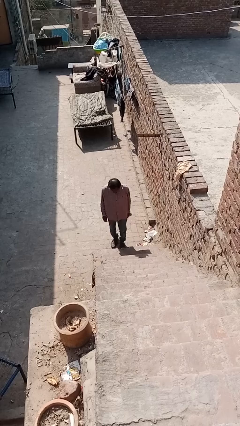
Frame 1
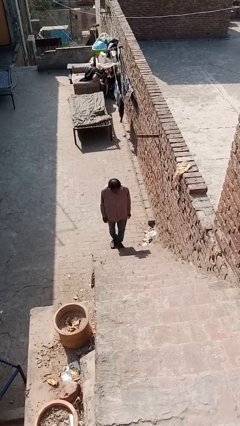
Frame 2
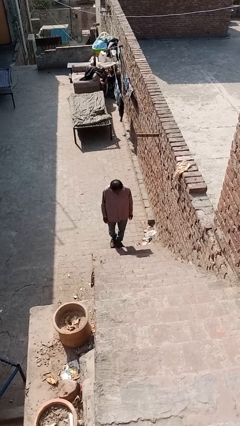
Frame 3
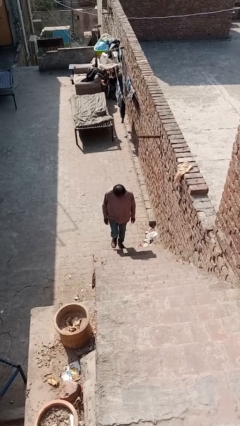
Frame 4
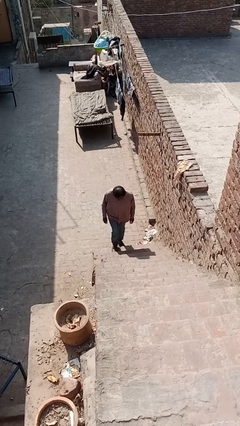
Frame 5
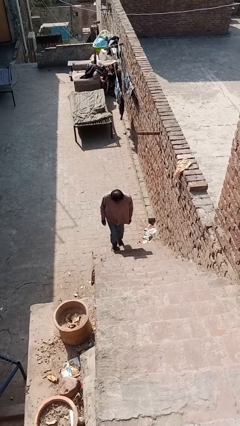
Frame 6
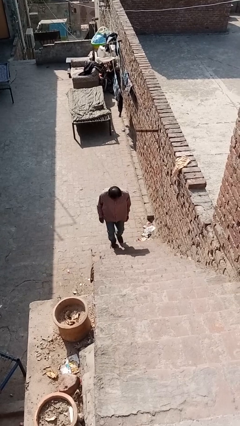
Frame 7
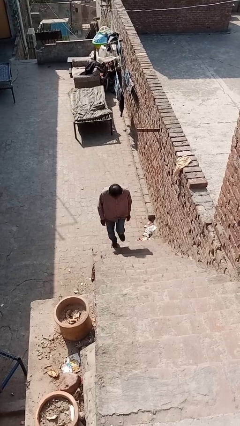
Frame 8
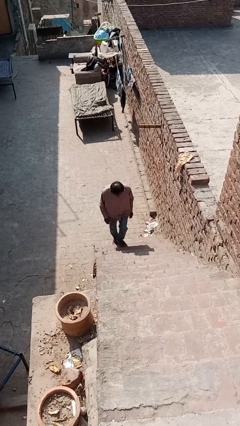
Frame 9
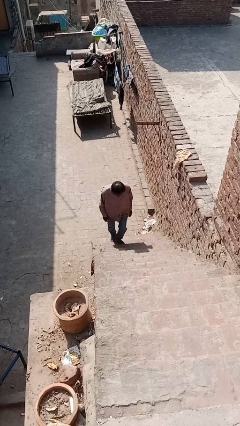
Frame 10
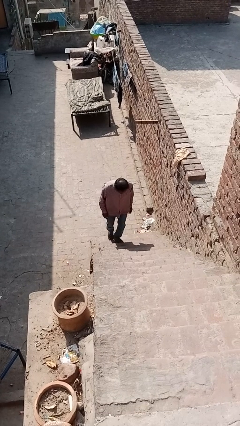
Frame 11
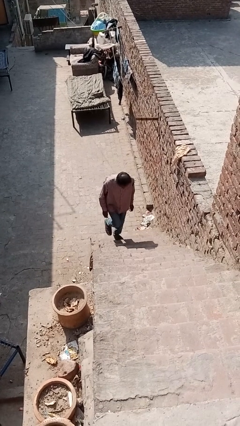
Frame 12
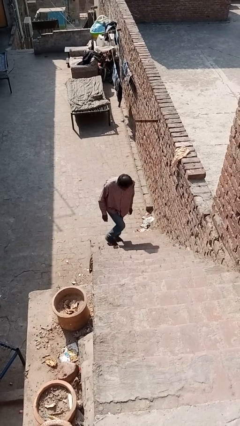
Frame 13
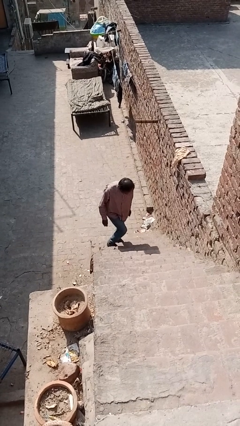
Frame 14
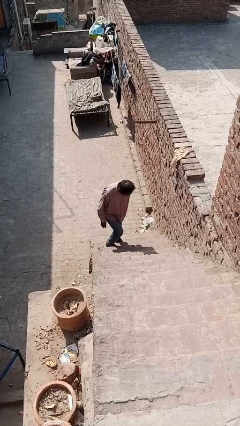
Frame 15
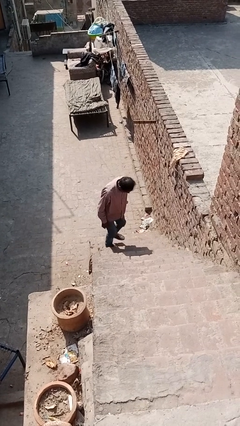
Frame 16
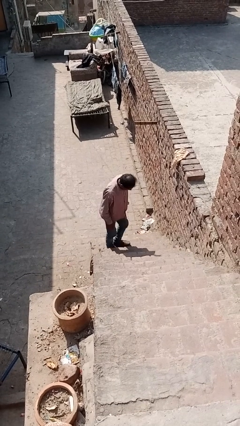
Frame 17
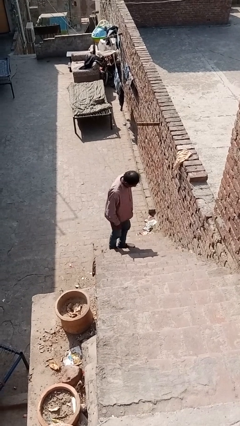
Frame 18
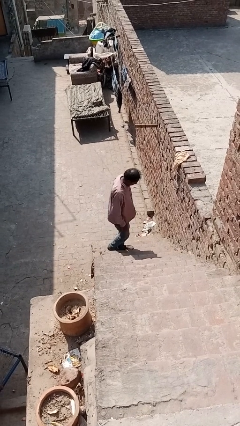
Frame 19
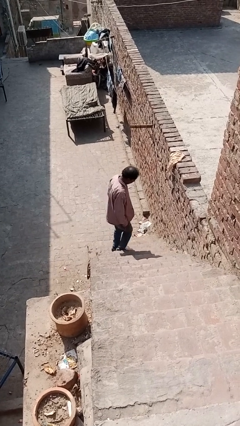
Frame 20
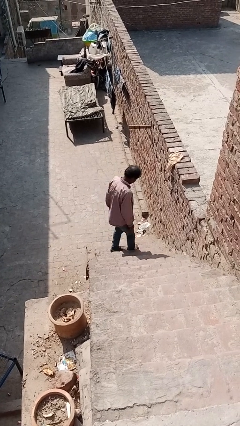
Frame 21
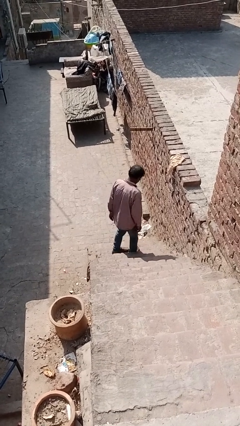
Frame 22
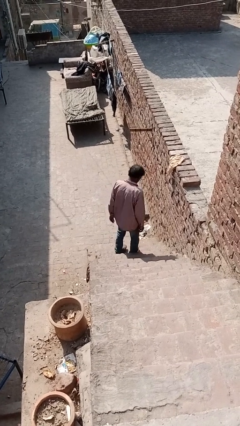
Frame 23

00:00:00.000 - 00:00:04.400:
person climbs up stairs

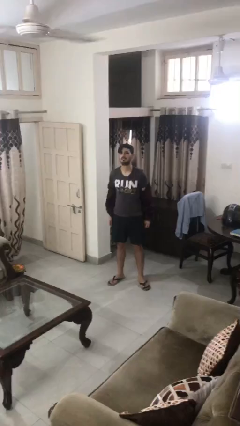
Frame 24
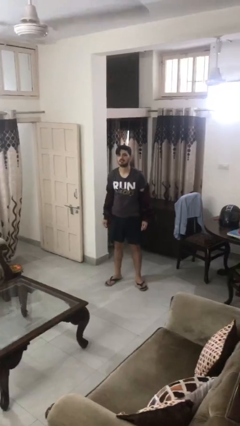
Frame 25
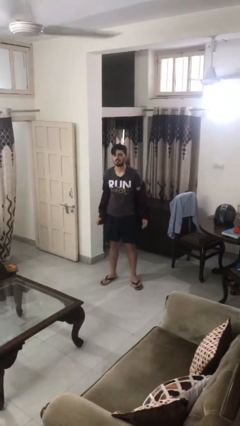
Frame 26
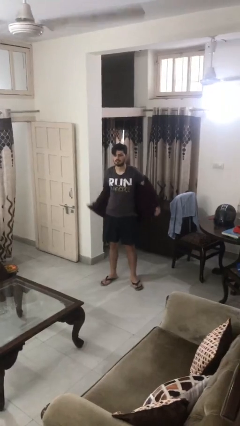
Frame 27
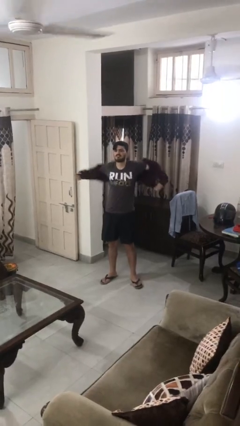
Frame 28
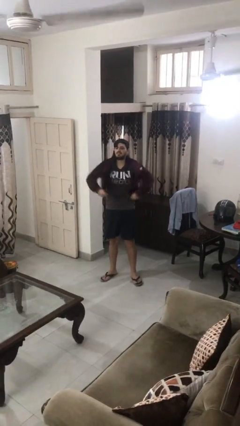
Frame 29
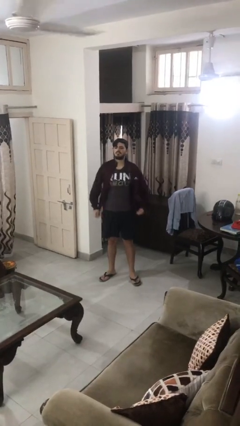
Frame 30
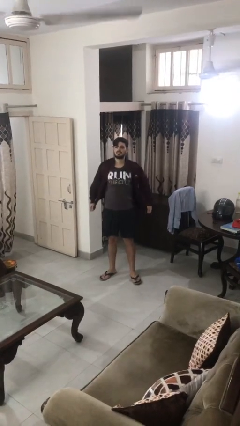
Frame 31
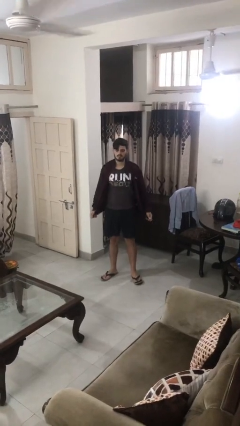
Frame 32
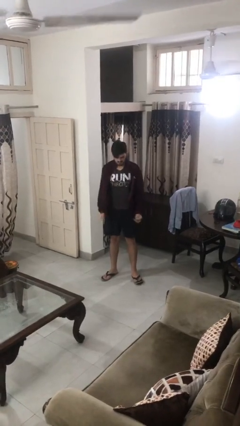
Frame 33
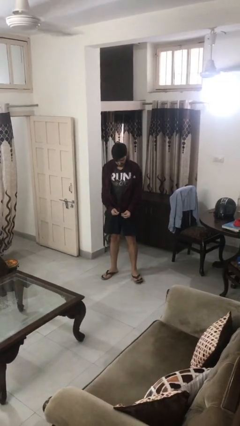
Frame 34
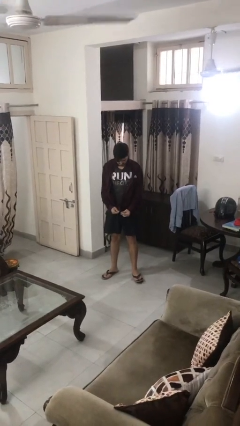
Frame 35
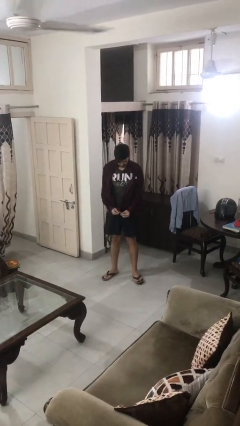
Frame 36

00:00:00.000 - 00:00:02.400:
person puts on jacket

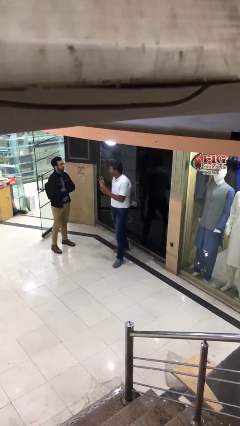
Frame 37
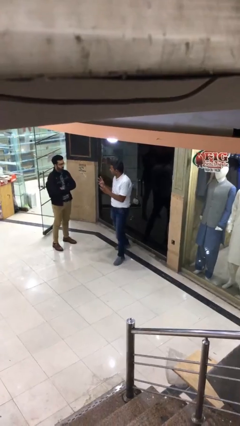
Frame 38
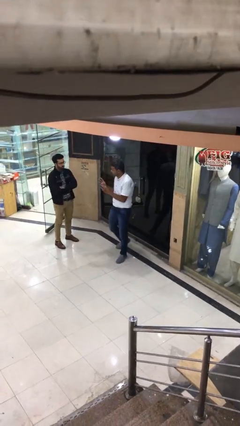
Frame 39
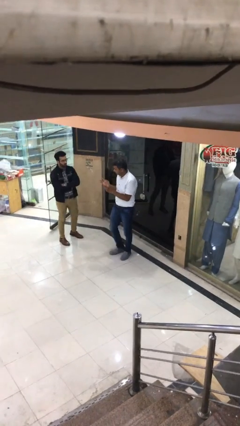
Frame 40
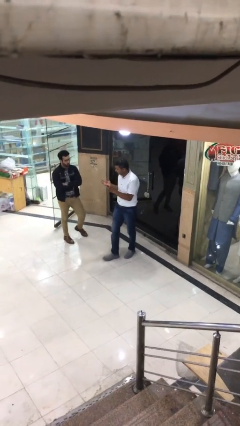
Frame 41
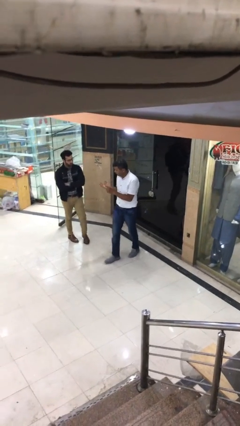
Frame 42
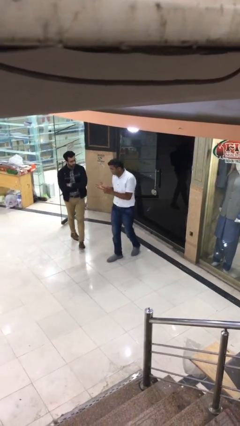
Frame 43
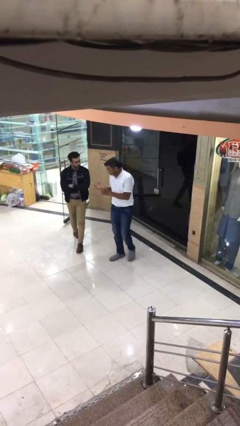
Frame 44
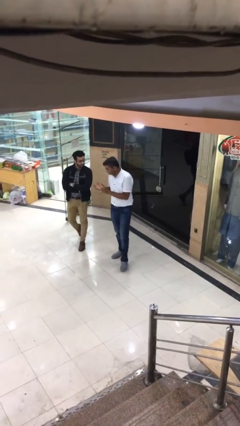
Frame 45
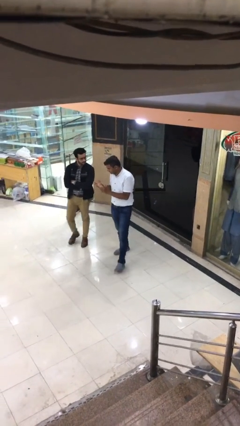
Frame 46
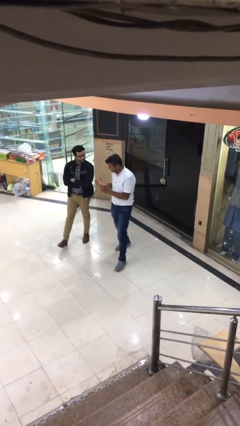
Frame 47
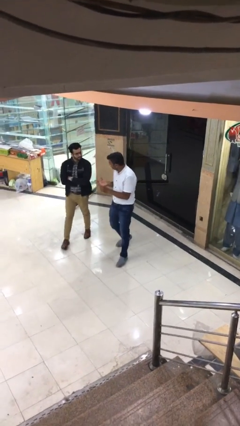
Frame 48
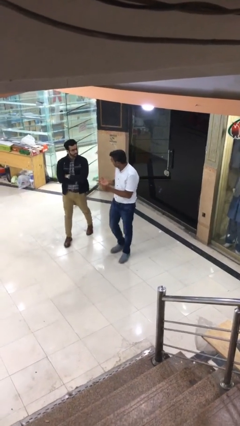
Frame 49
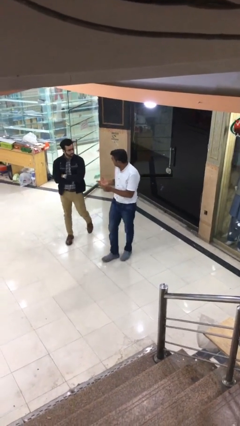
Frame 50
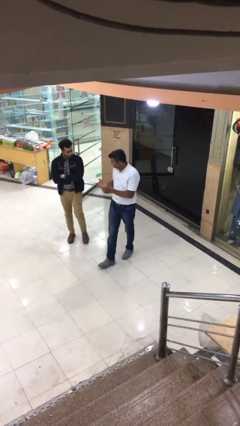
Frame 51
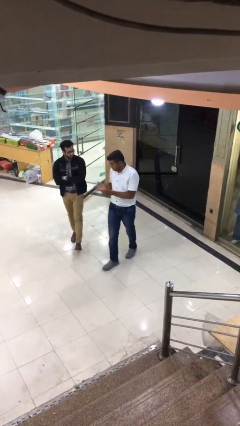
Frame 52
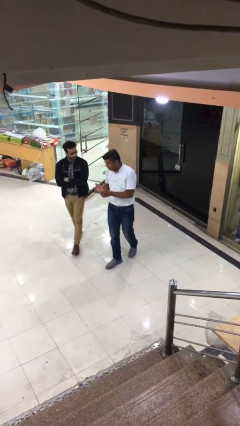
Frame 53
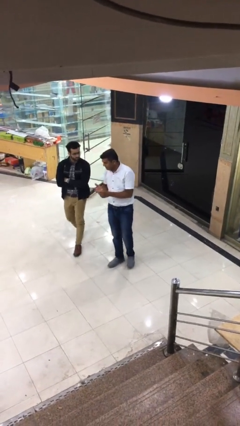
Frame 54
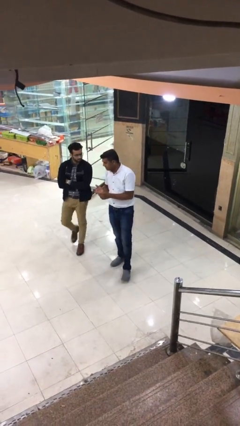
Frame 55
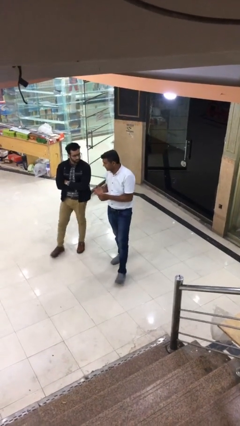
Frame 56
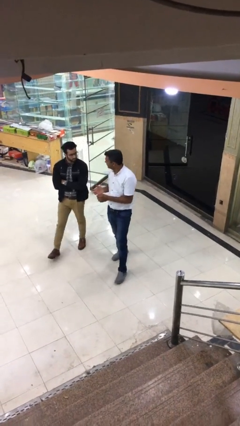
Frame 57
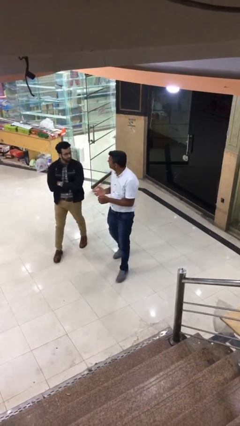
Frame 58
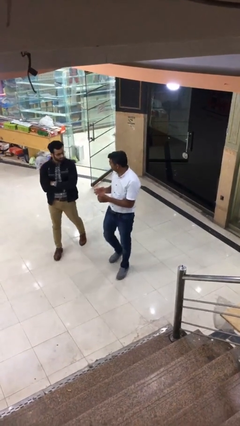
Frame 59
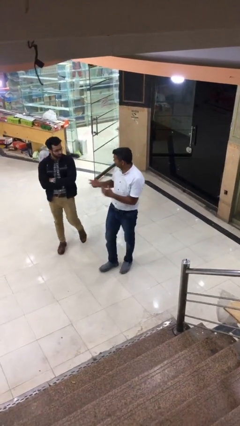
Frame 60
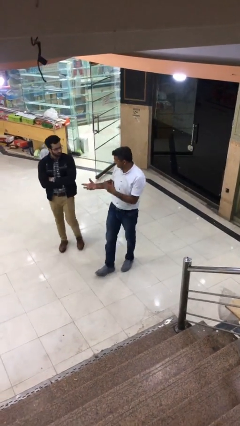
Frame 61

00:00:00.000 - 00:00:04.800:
person talks to person

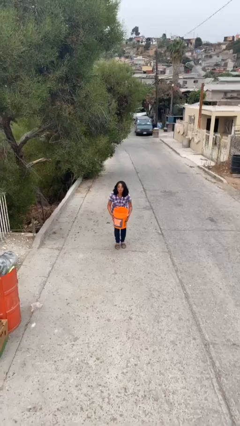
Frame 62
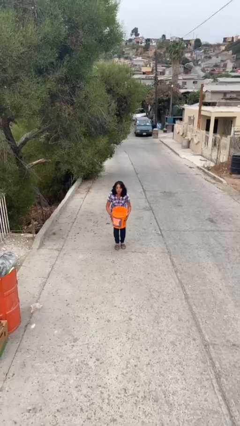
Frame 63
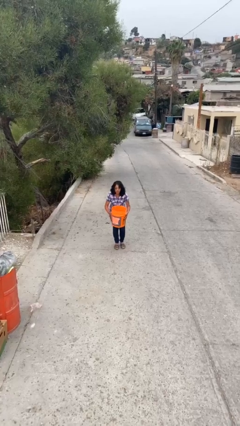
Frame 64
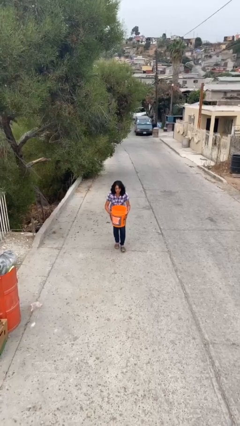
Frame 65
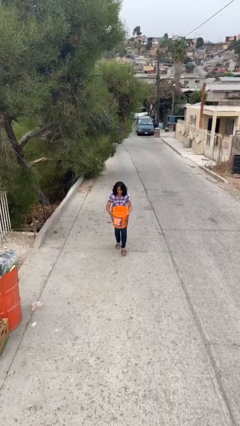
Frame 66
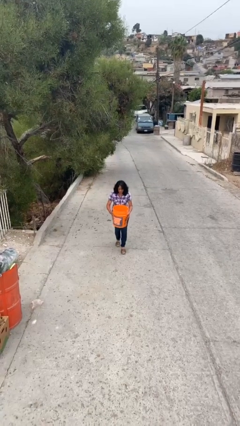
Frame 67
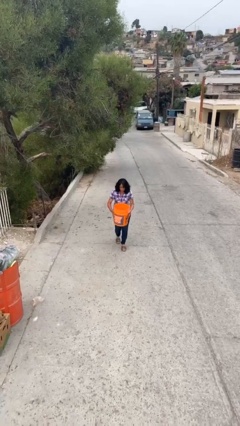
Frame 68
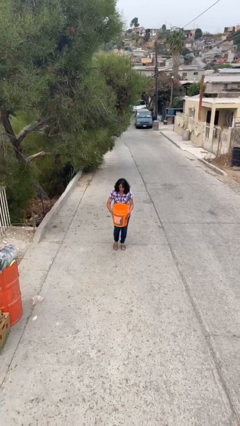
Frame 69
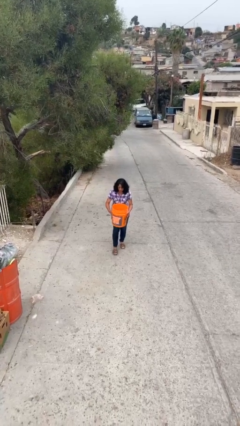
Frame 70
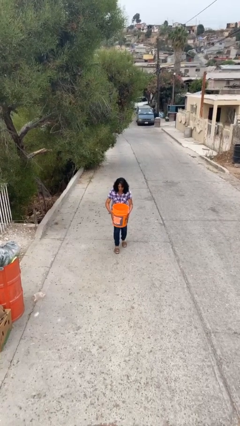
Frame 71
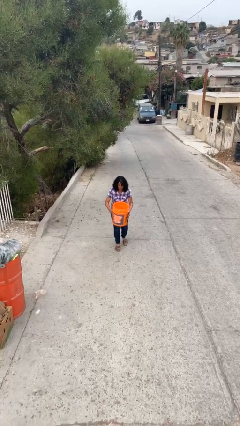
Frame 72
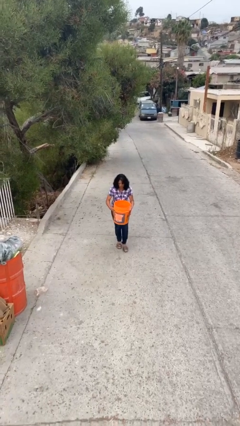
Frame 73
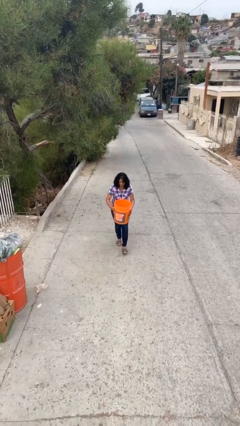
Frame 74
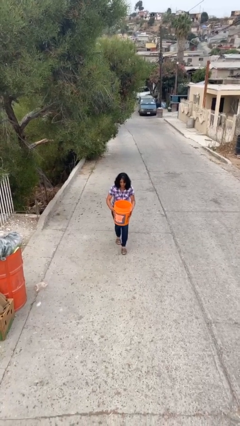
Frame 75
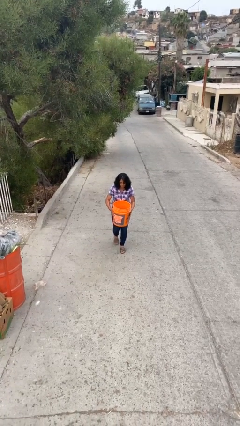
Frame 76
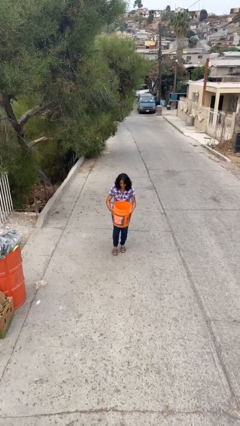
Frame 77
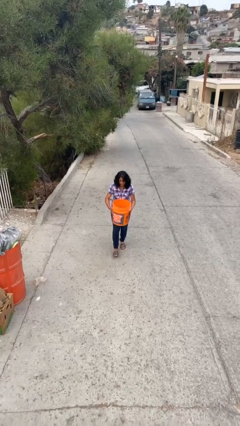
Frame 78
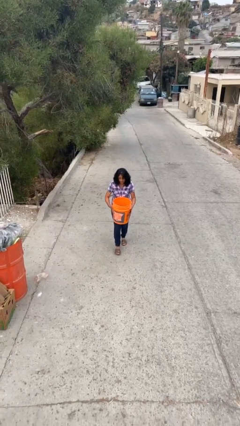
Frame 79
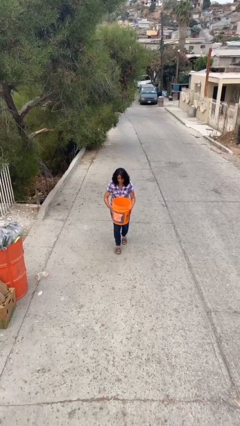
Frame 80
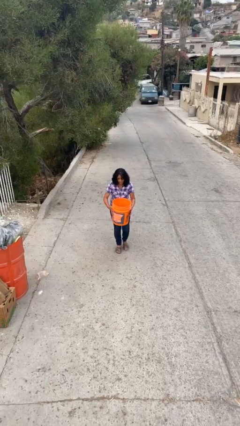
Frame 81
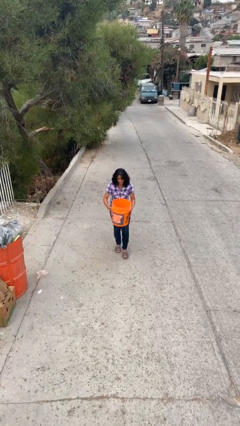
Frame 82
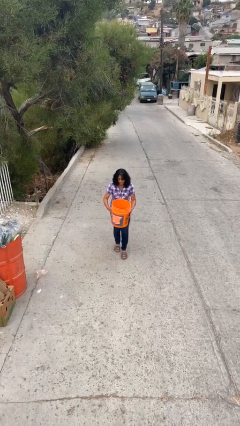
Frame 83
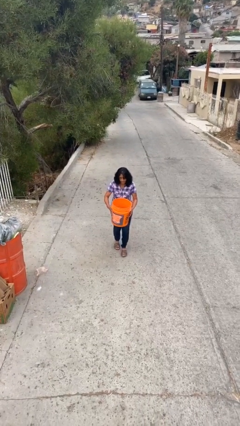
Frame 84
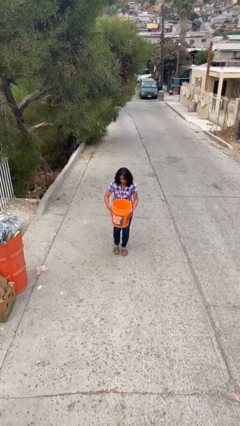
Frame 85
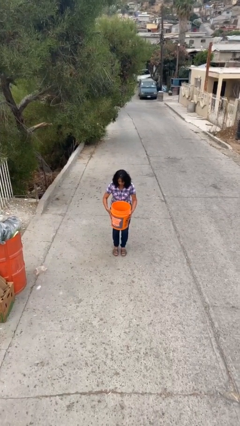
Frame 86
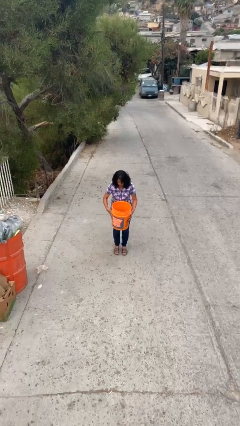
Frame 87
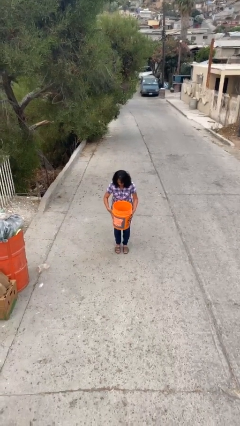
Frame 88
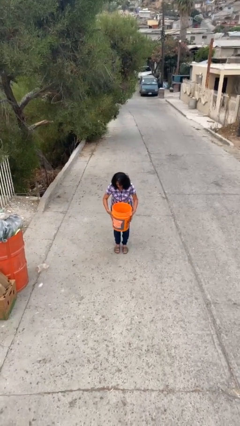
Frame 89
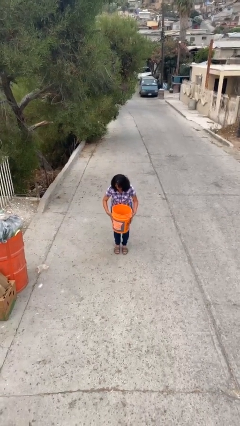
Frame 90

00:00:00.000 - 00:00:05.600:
person carries heavy object

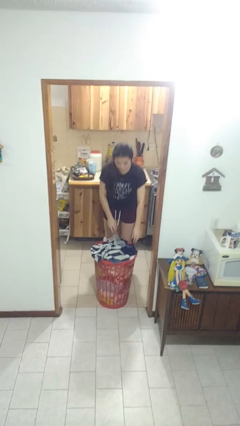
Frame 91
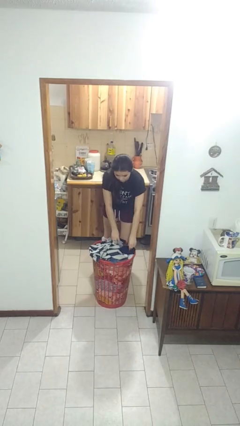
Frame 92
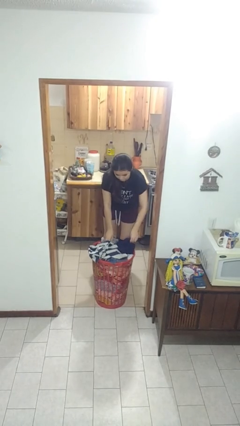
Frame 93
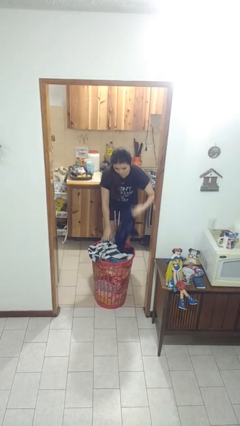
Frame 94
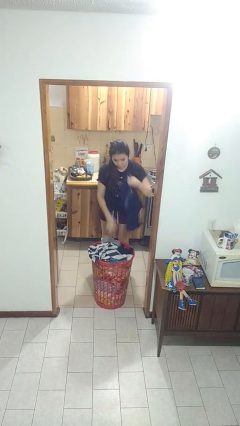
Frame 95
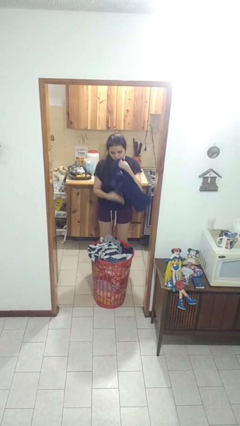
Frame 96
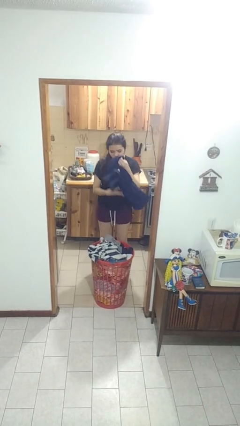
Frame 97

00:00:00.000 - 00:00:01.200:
person takes object from basket
